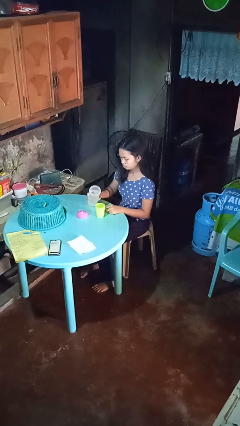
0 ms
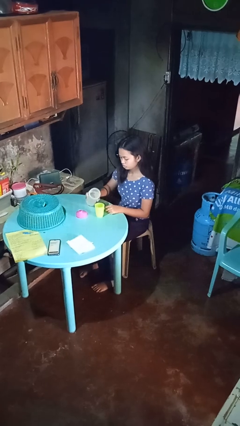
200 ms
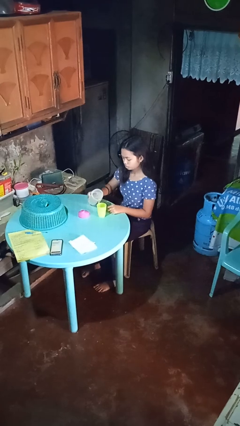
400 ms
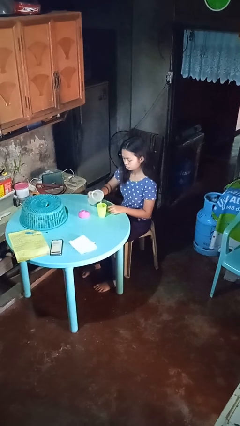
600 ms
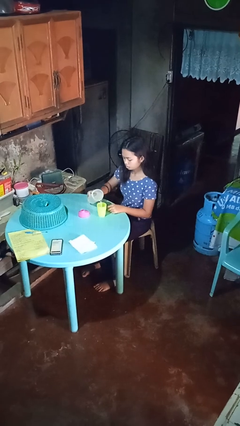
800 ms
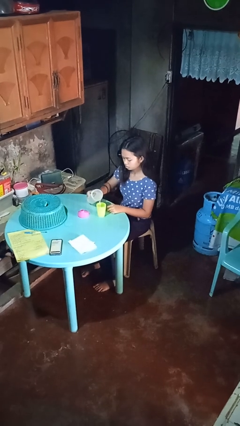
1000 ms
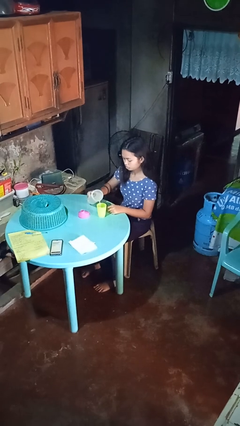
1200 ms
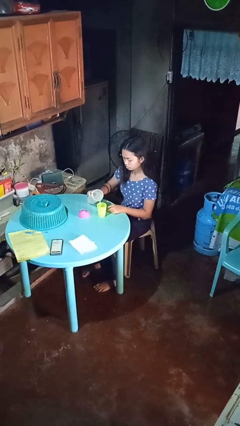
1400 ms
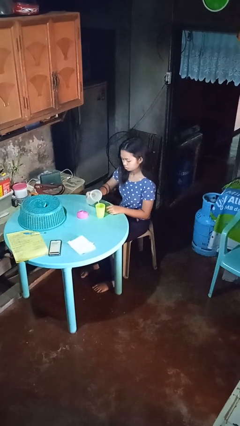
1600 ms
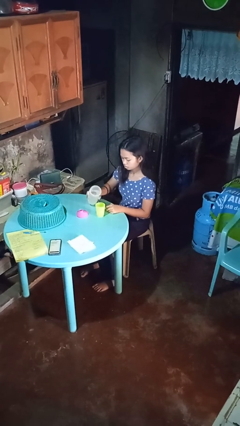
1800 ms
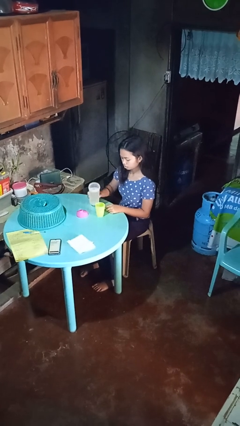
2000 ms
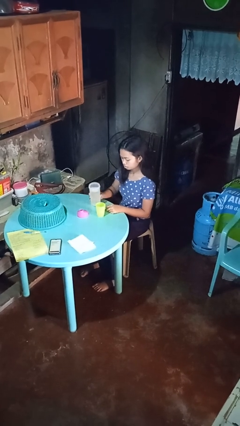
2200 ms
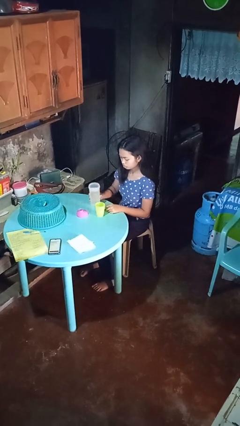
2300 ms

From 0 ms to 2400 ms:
person pours liquid into cup

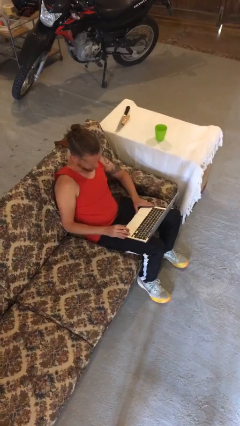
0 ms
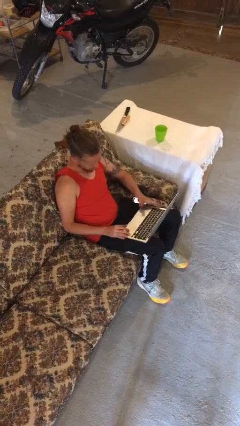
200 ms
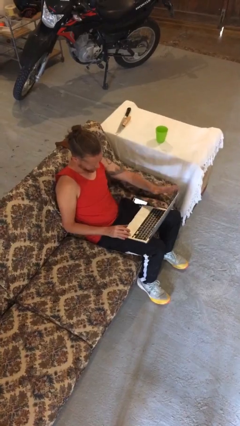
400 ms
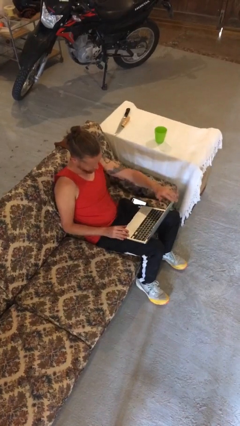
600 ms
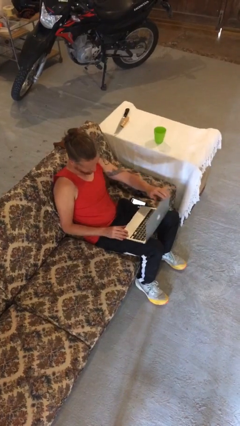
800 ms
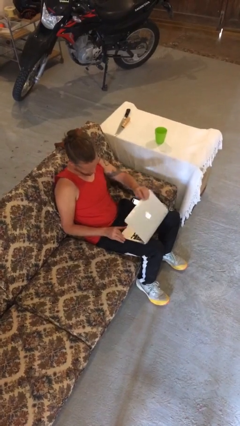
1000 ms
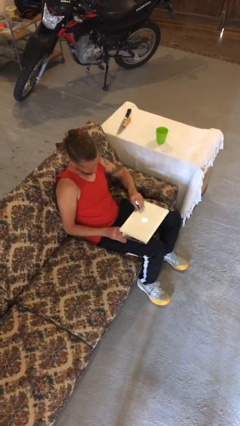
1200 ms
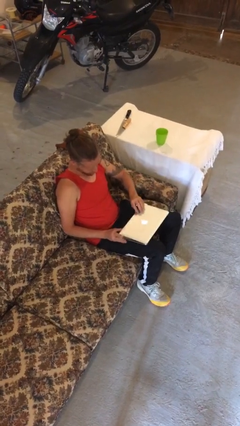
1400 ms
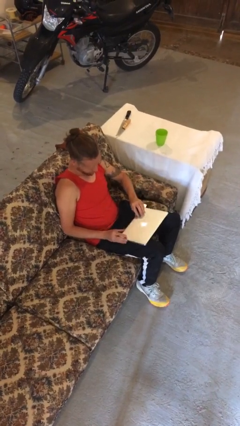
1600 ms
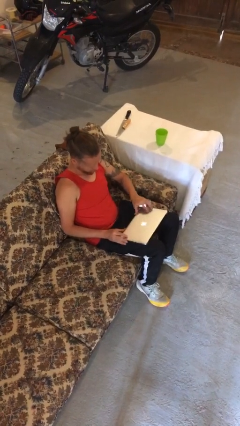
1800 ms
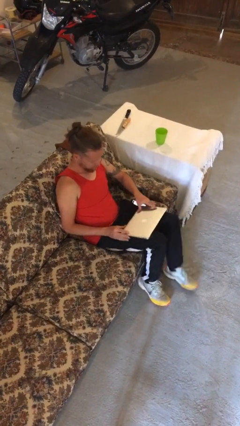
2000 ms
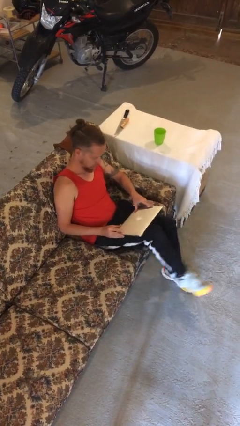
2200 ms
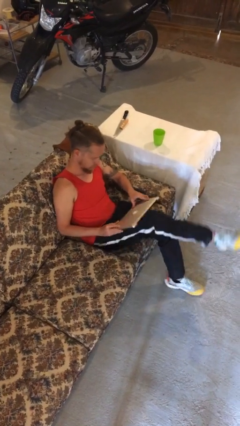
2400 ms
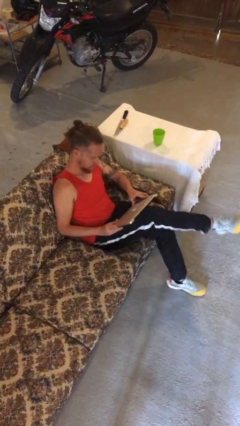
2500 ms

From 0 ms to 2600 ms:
person closes laptop

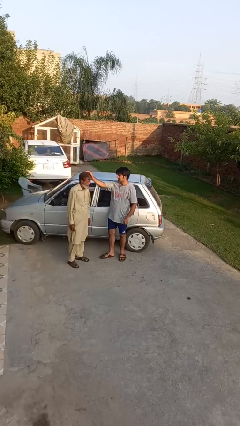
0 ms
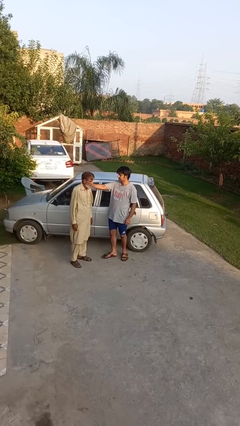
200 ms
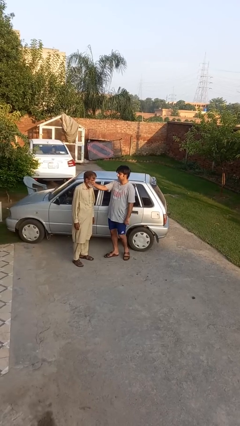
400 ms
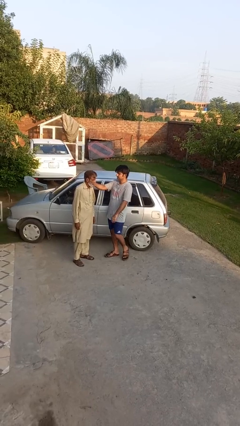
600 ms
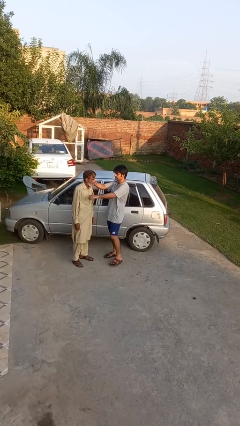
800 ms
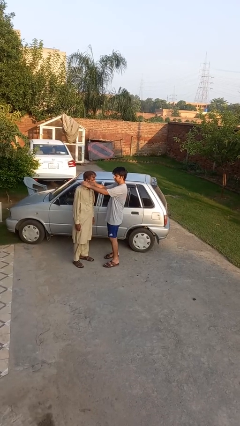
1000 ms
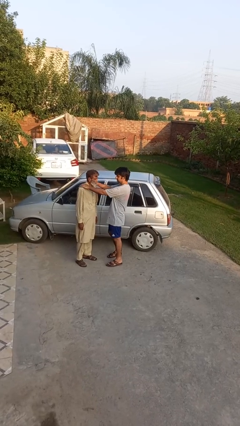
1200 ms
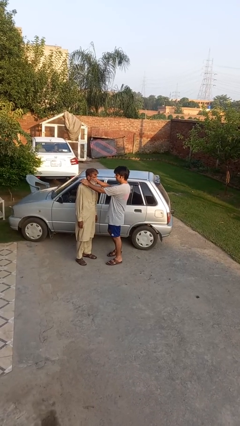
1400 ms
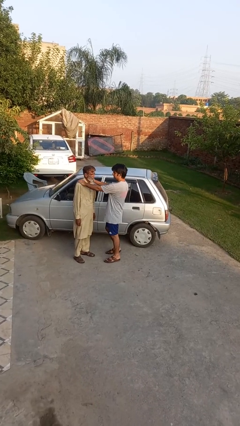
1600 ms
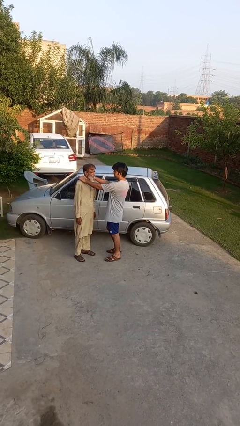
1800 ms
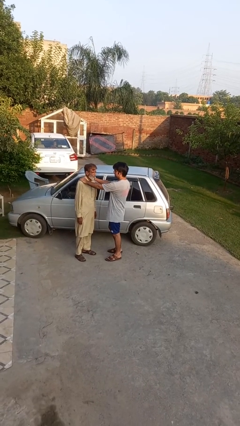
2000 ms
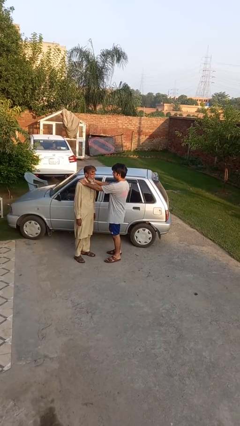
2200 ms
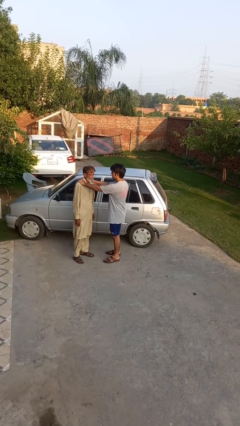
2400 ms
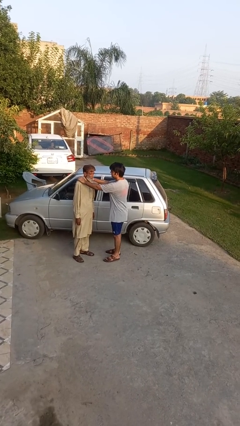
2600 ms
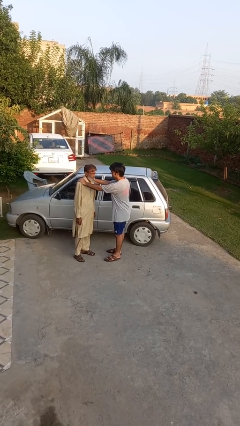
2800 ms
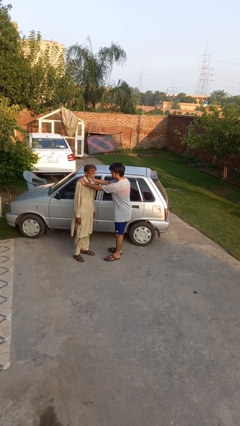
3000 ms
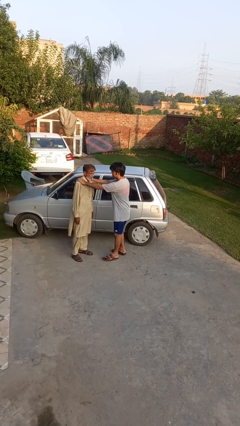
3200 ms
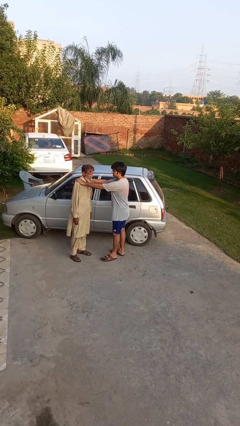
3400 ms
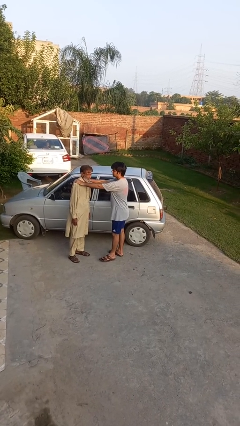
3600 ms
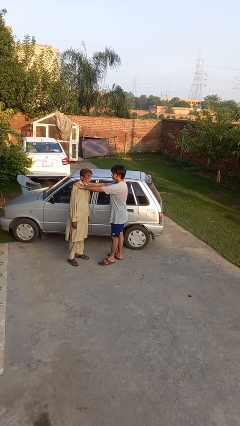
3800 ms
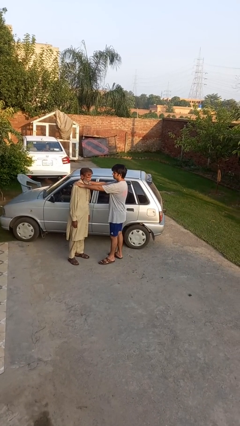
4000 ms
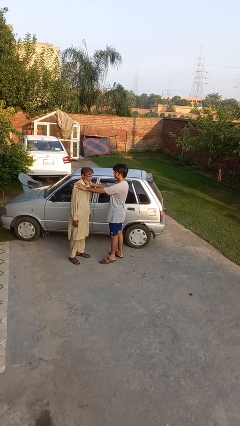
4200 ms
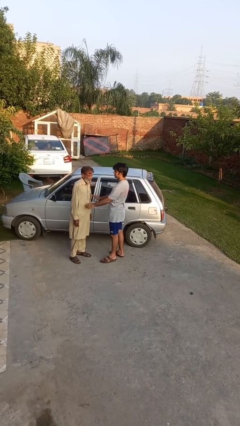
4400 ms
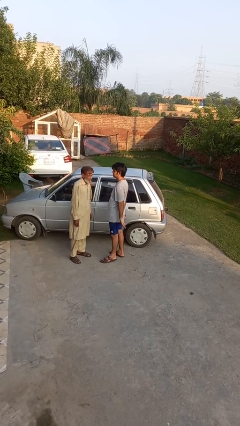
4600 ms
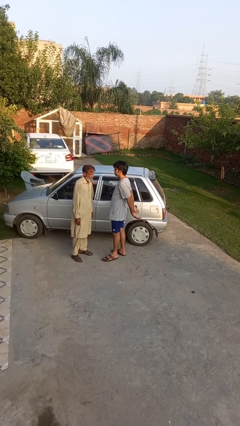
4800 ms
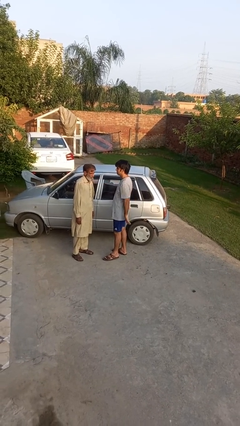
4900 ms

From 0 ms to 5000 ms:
person pounds shoulders of person

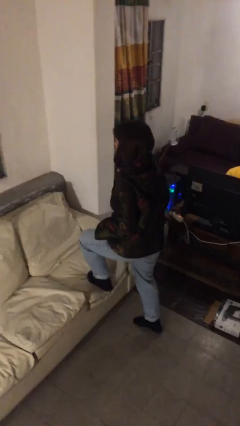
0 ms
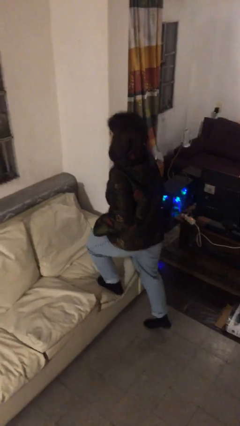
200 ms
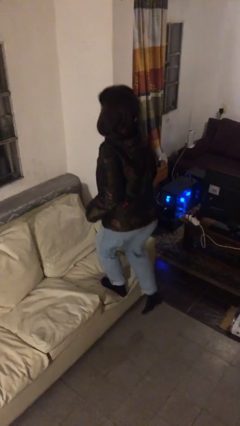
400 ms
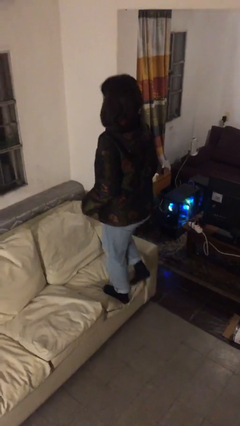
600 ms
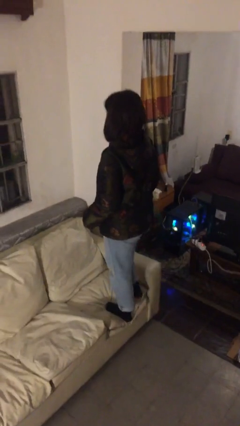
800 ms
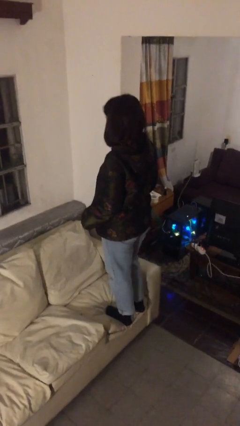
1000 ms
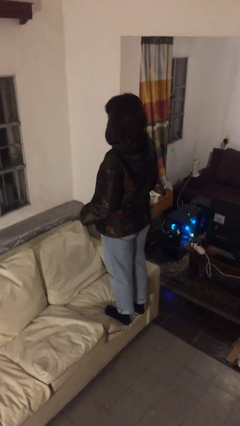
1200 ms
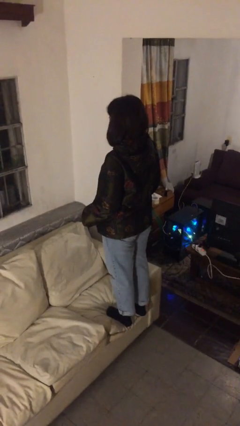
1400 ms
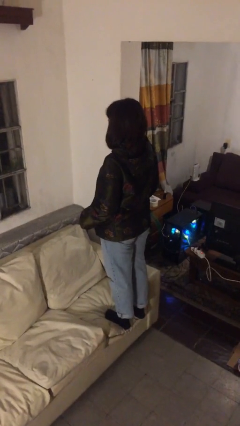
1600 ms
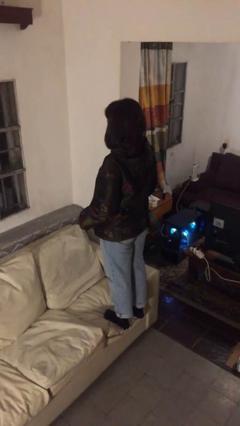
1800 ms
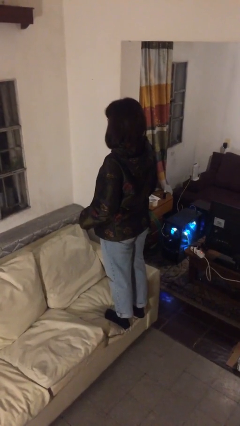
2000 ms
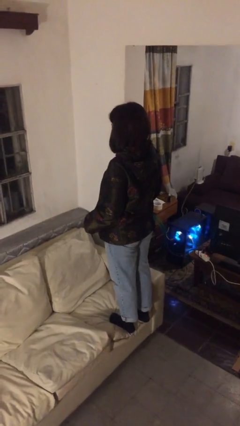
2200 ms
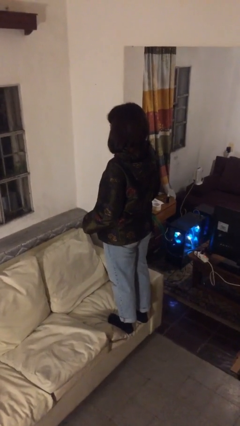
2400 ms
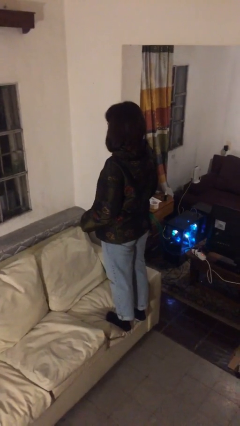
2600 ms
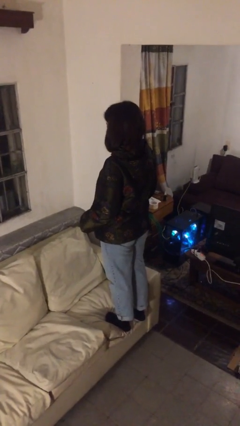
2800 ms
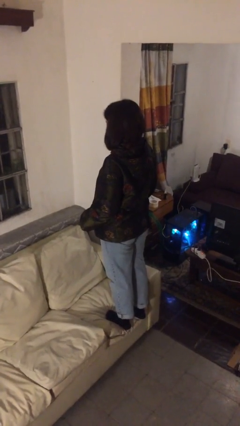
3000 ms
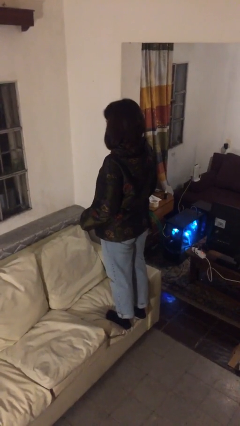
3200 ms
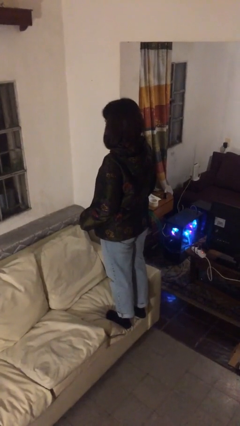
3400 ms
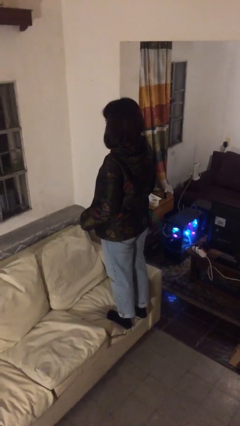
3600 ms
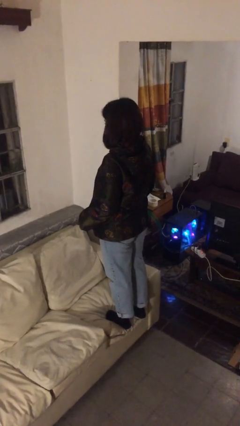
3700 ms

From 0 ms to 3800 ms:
person climbs on couch

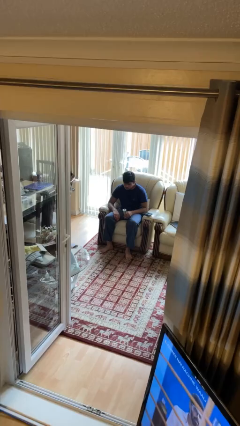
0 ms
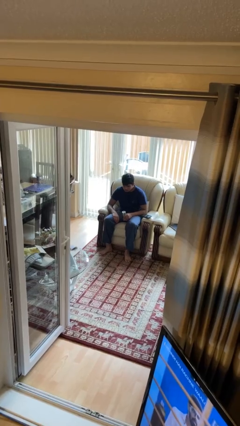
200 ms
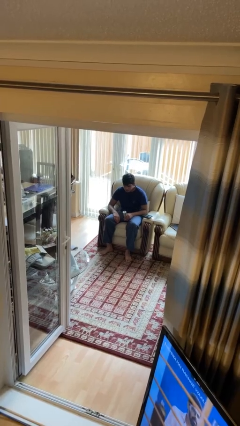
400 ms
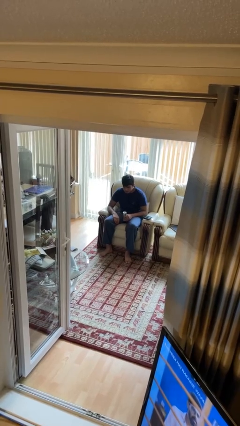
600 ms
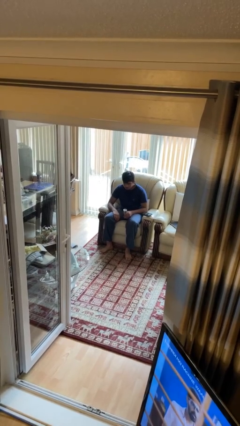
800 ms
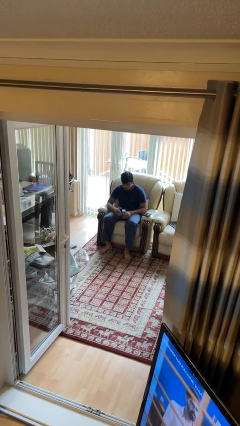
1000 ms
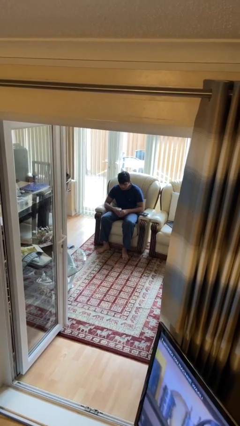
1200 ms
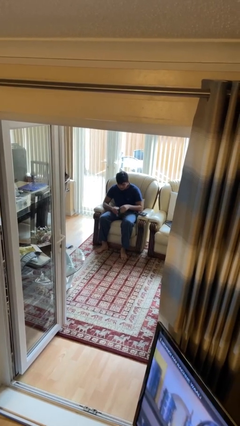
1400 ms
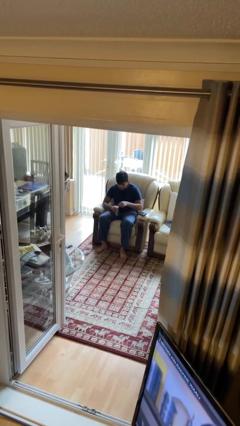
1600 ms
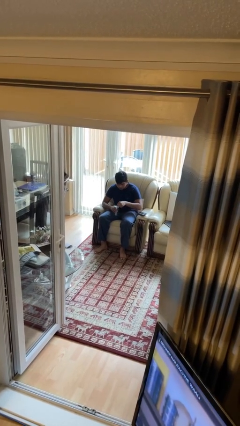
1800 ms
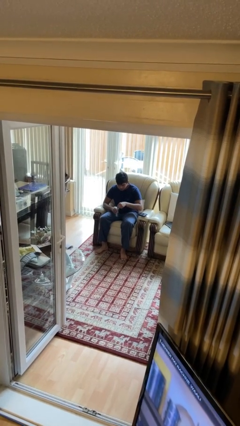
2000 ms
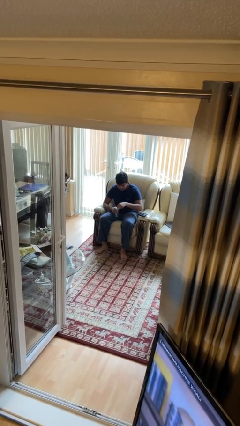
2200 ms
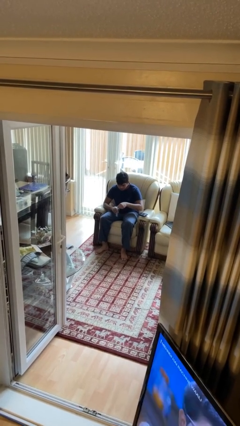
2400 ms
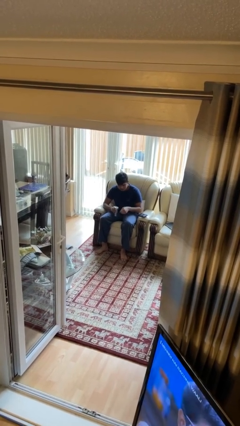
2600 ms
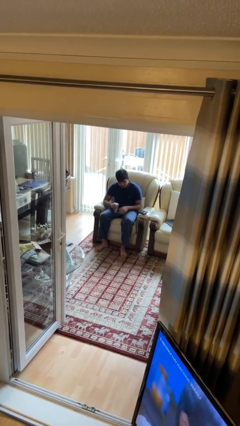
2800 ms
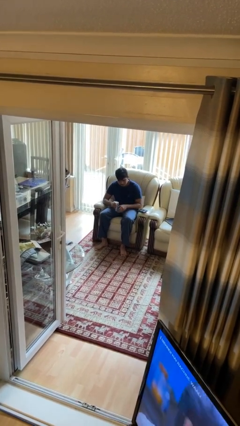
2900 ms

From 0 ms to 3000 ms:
person opens beverage can

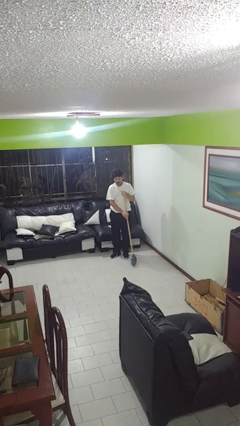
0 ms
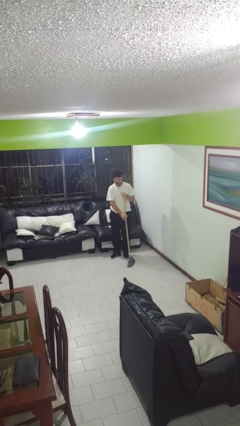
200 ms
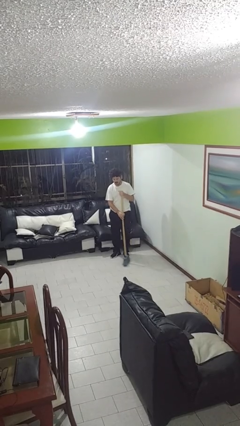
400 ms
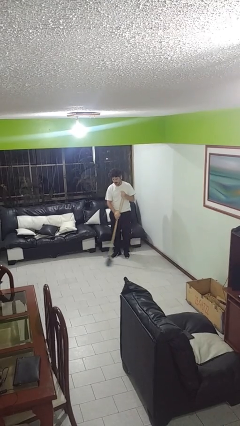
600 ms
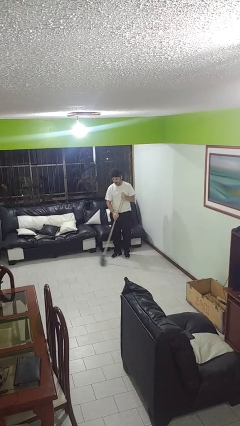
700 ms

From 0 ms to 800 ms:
person sweeps floor
